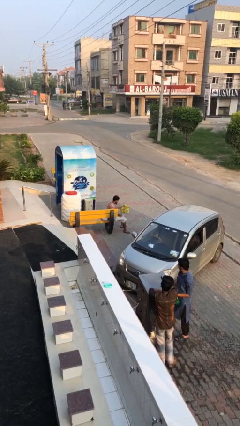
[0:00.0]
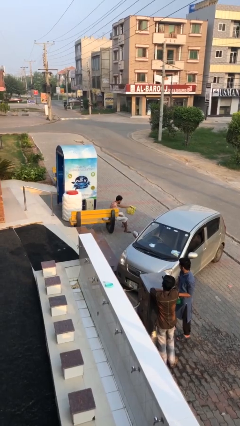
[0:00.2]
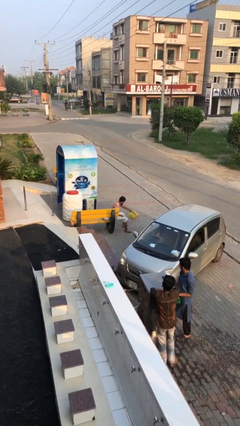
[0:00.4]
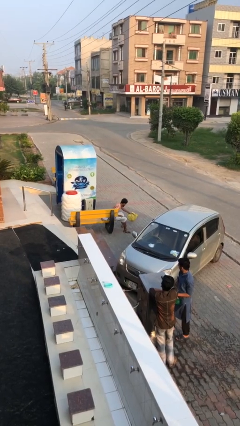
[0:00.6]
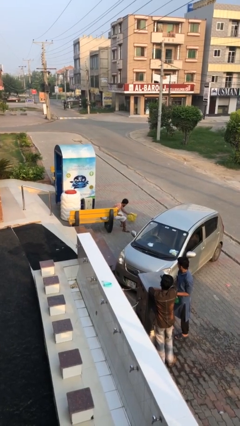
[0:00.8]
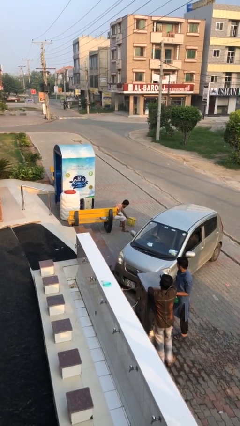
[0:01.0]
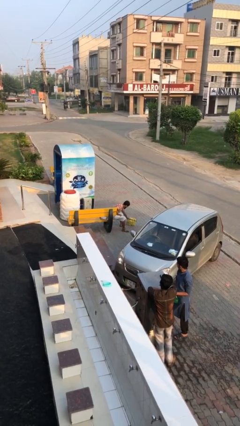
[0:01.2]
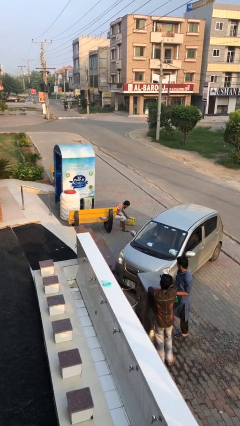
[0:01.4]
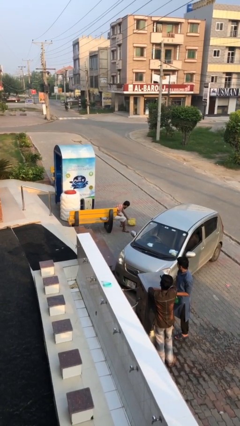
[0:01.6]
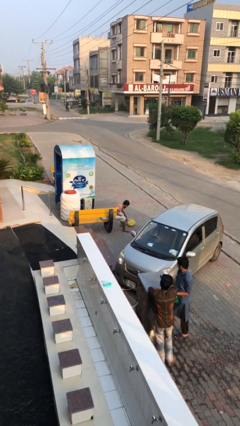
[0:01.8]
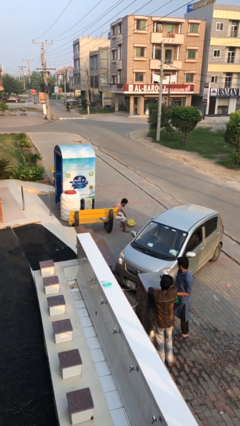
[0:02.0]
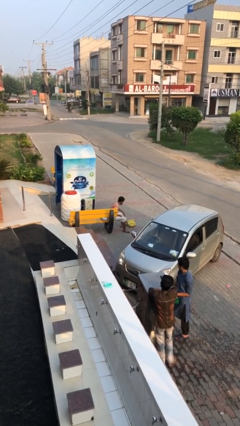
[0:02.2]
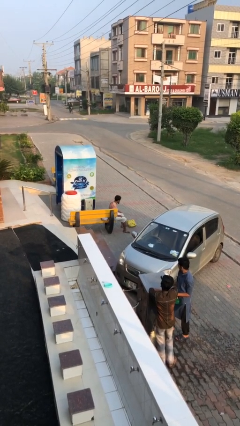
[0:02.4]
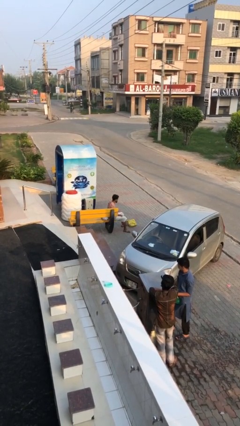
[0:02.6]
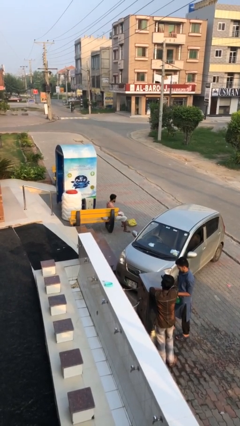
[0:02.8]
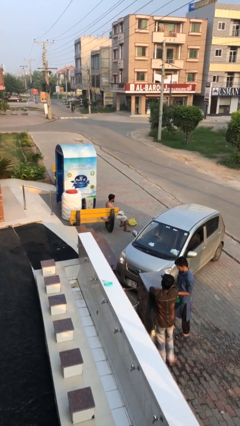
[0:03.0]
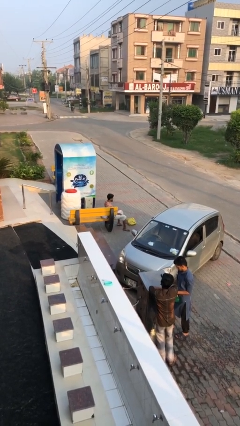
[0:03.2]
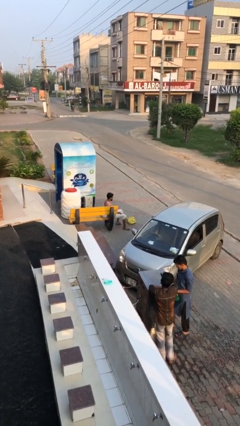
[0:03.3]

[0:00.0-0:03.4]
person puts down object on floor

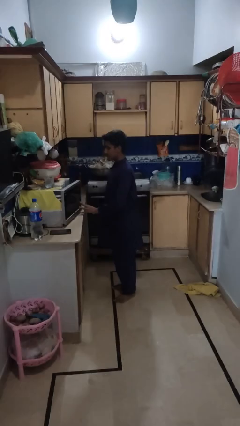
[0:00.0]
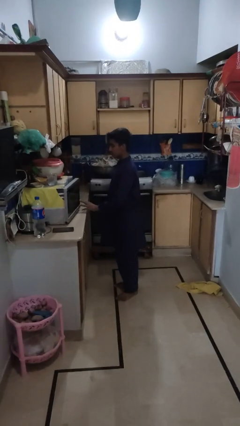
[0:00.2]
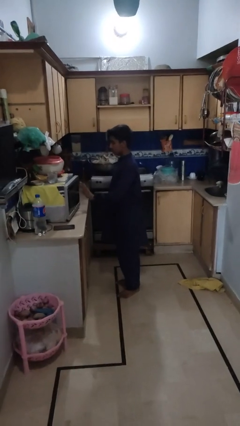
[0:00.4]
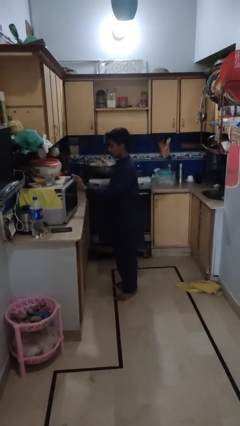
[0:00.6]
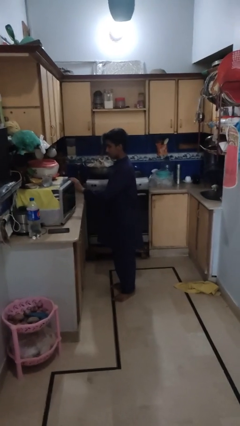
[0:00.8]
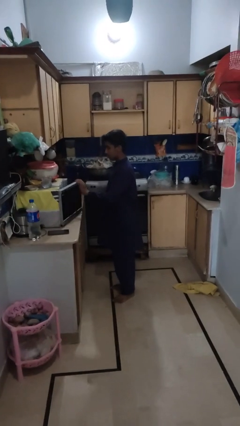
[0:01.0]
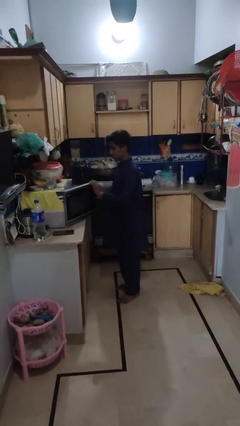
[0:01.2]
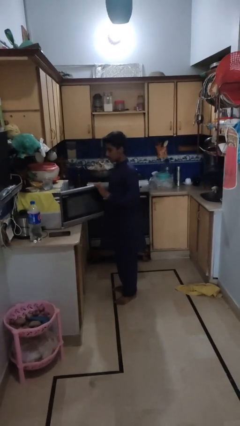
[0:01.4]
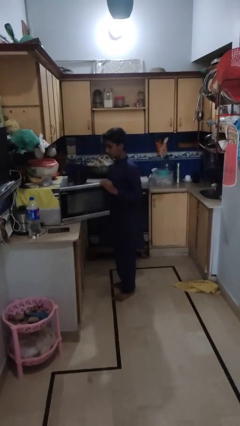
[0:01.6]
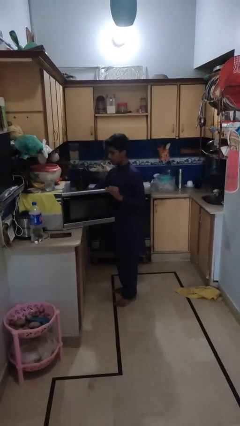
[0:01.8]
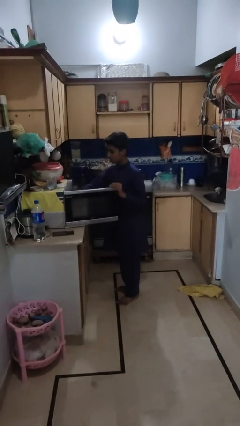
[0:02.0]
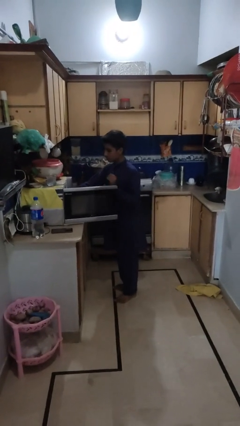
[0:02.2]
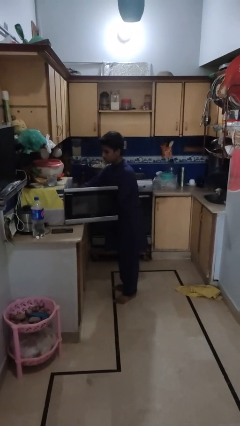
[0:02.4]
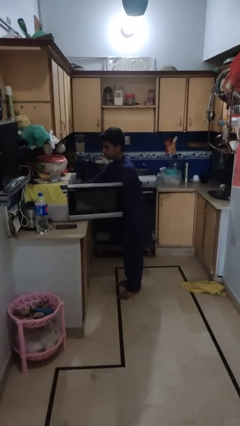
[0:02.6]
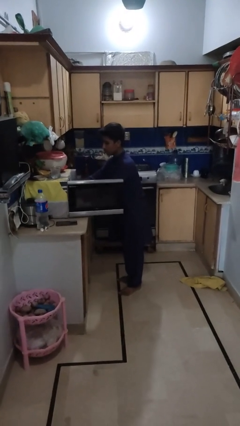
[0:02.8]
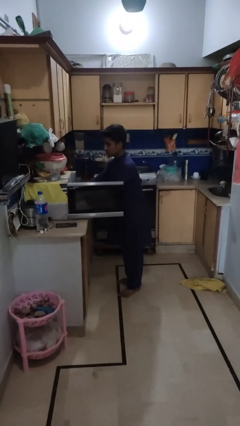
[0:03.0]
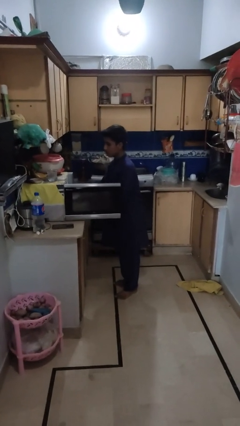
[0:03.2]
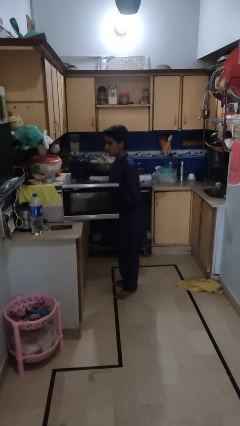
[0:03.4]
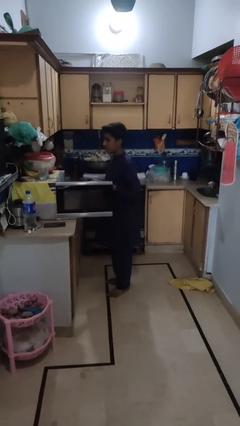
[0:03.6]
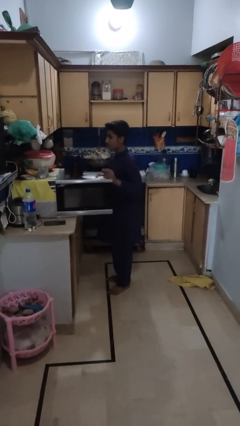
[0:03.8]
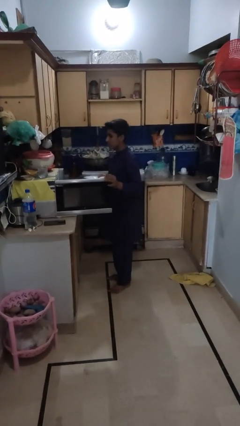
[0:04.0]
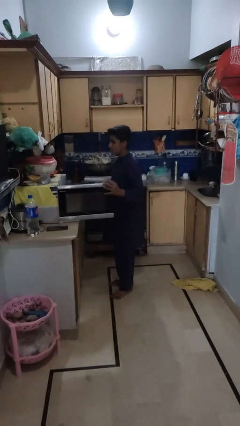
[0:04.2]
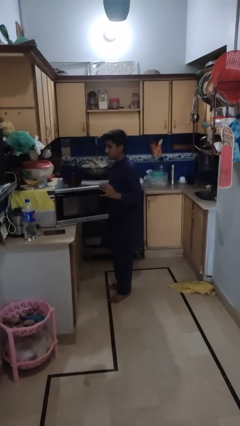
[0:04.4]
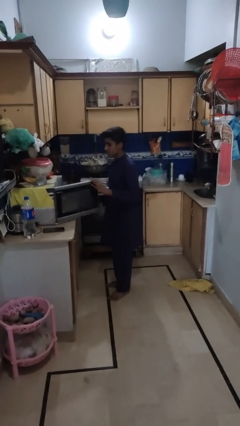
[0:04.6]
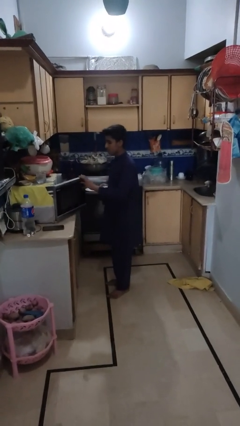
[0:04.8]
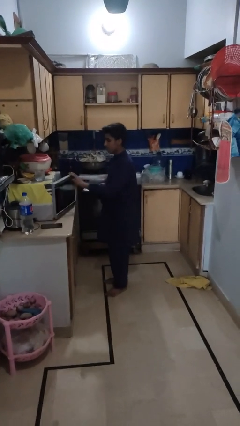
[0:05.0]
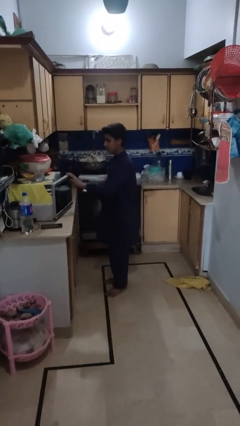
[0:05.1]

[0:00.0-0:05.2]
person takes object from microwave

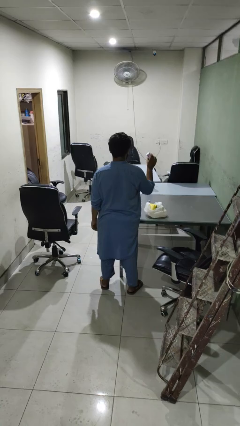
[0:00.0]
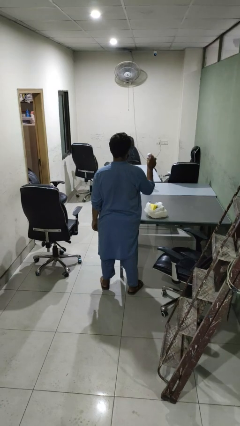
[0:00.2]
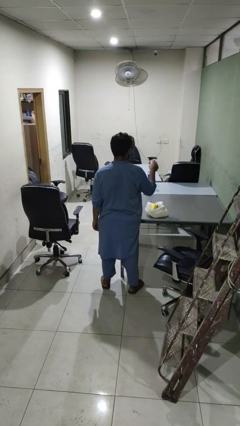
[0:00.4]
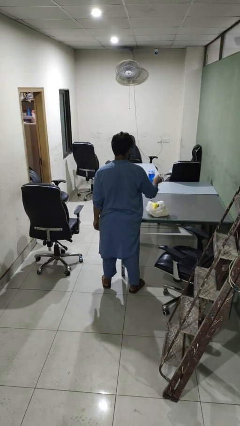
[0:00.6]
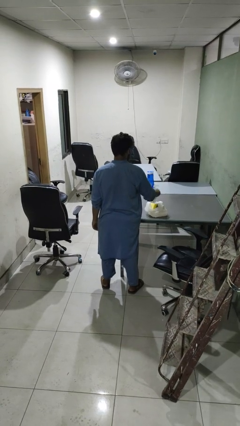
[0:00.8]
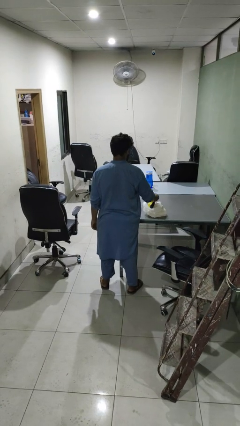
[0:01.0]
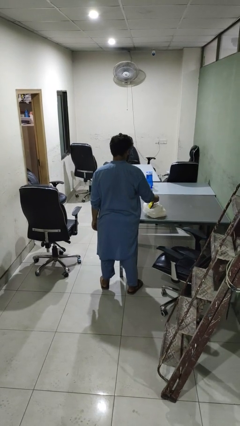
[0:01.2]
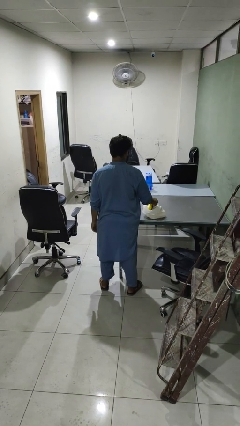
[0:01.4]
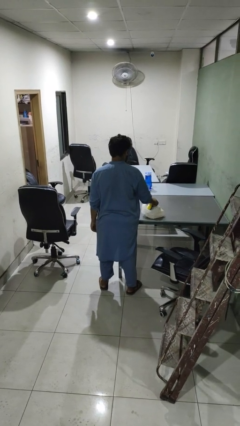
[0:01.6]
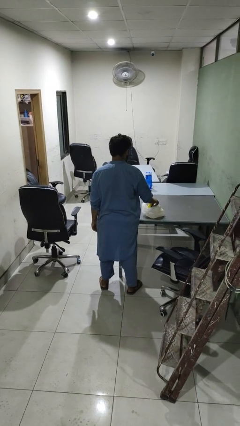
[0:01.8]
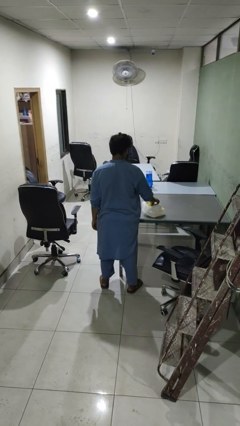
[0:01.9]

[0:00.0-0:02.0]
person puts object into bag

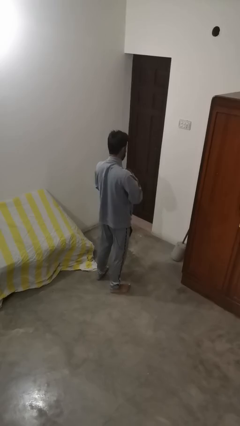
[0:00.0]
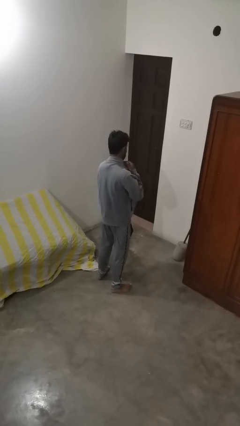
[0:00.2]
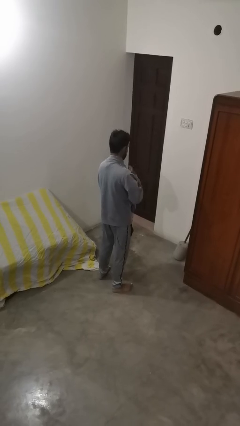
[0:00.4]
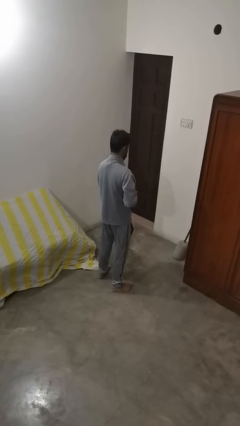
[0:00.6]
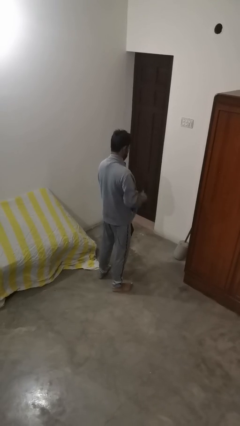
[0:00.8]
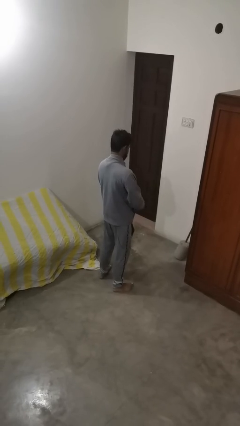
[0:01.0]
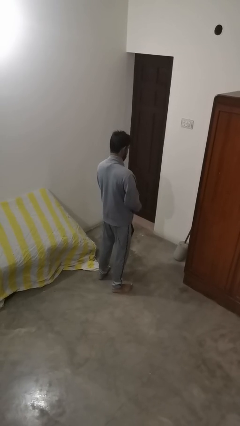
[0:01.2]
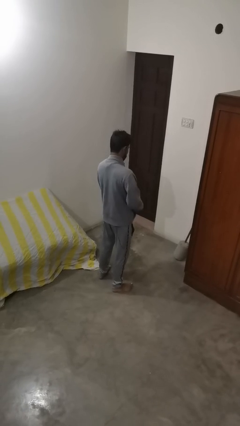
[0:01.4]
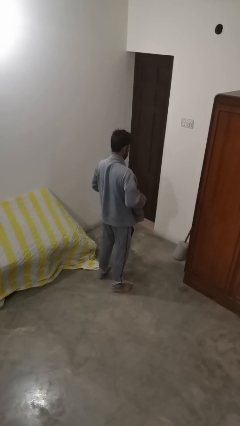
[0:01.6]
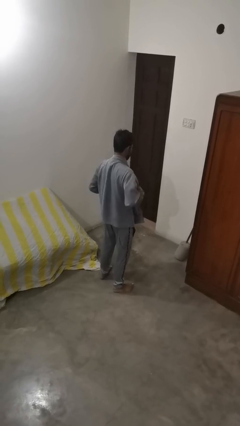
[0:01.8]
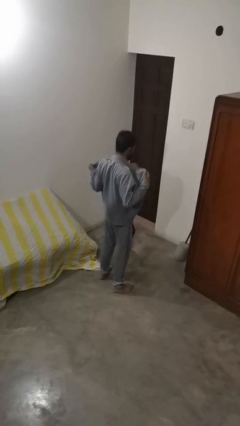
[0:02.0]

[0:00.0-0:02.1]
person unzips jacket

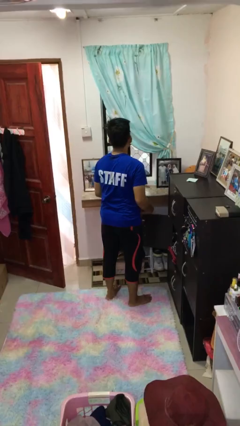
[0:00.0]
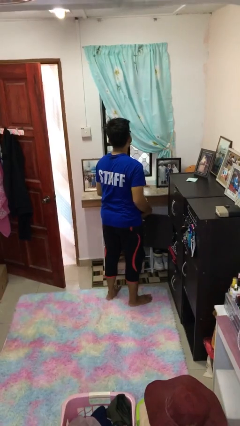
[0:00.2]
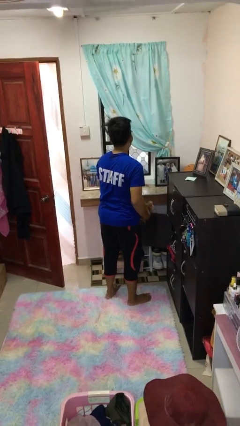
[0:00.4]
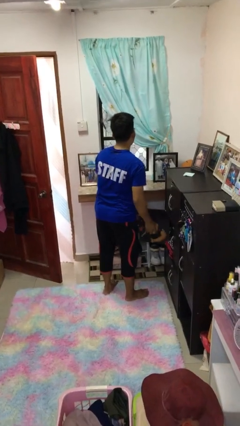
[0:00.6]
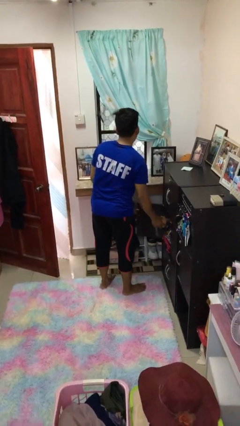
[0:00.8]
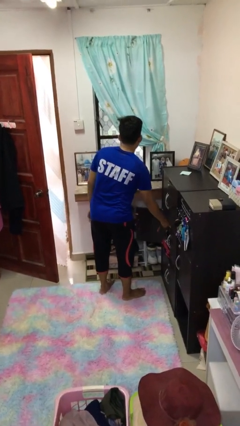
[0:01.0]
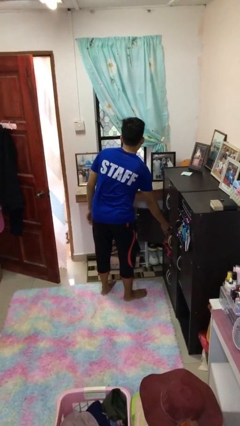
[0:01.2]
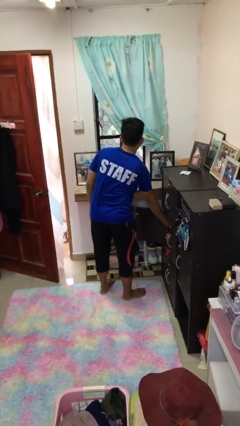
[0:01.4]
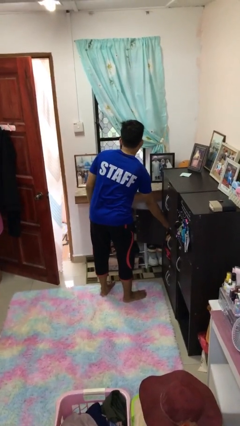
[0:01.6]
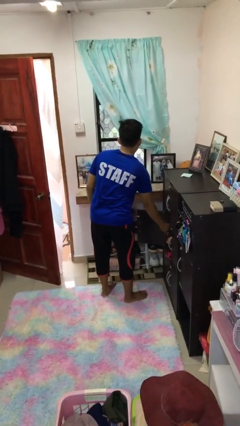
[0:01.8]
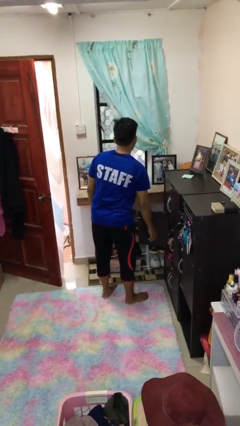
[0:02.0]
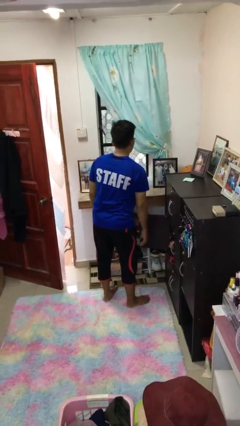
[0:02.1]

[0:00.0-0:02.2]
person puts down object into cabinet

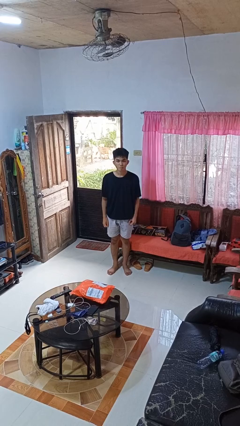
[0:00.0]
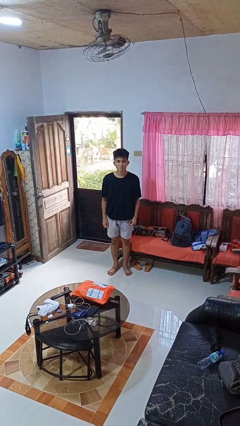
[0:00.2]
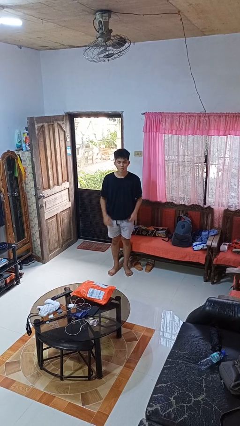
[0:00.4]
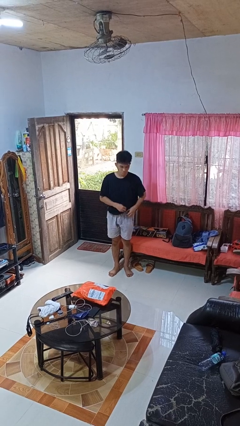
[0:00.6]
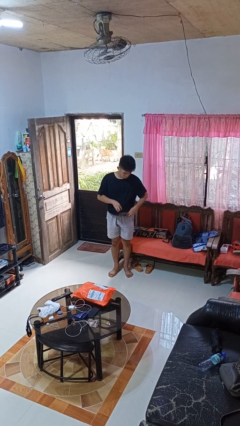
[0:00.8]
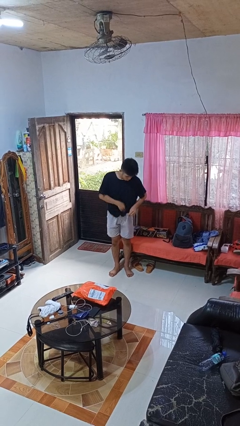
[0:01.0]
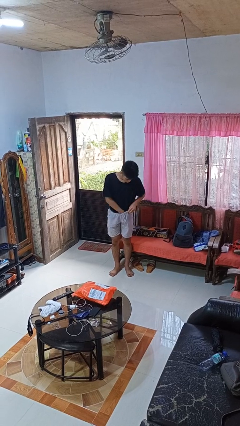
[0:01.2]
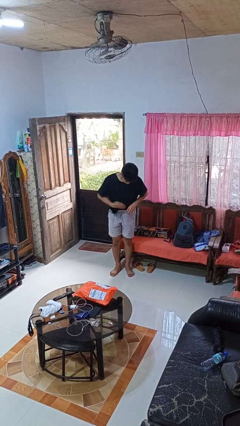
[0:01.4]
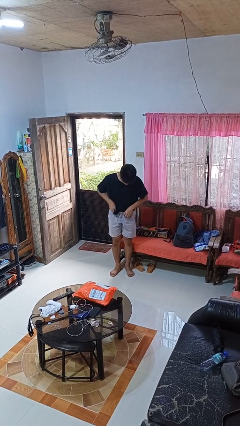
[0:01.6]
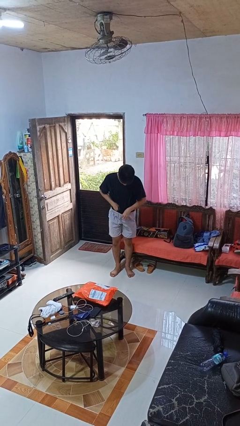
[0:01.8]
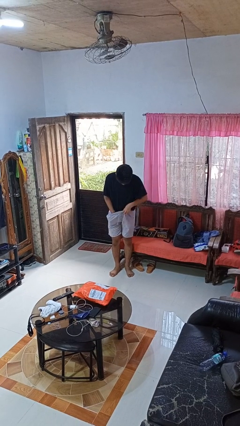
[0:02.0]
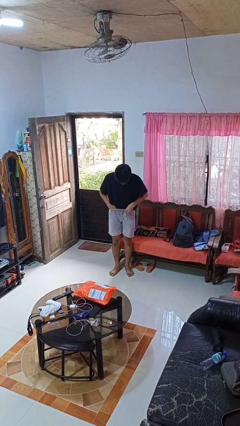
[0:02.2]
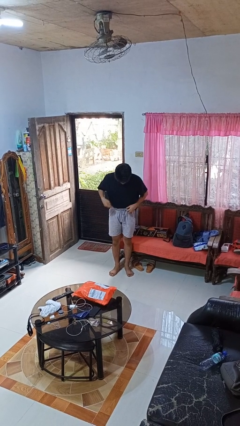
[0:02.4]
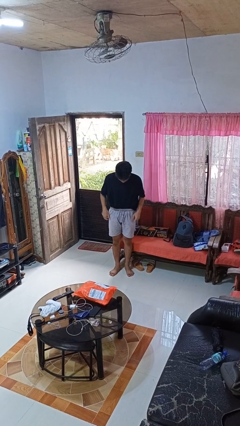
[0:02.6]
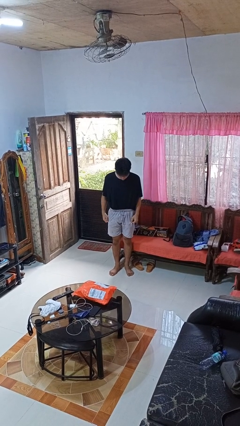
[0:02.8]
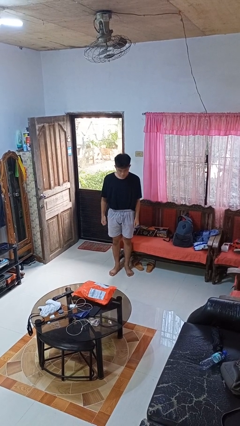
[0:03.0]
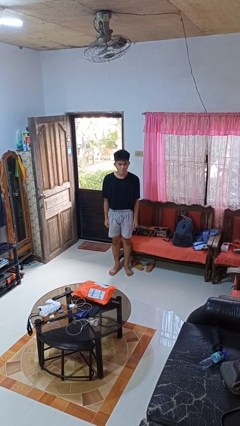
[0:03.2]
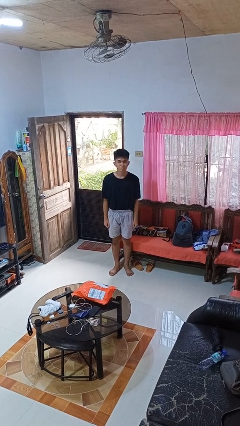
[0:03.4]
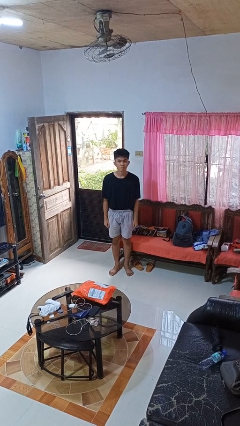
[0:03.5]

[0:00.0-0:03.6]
person tucks in shirt
